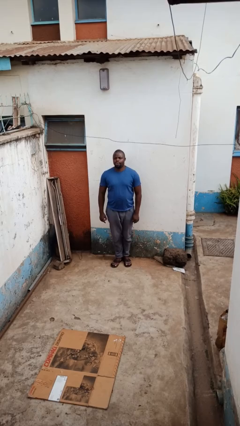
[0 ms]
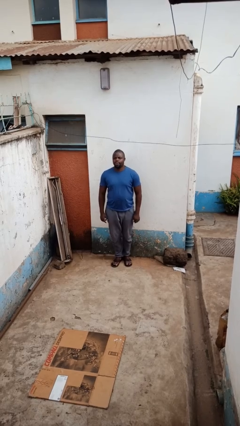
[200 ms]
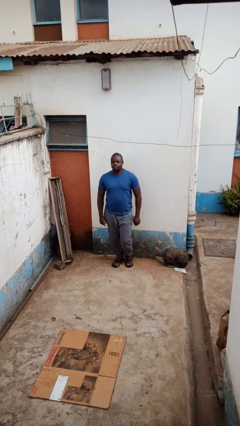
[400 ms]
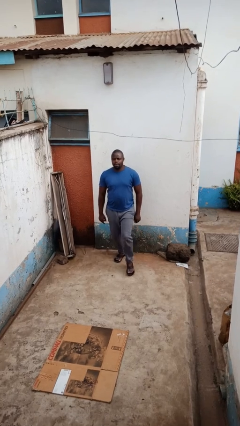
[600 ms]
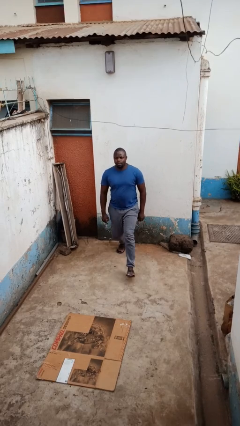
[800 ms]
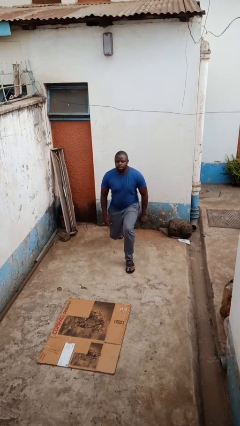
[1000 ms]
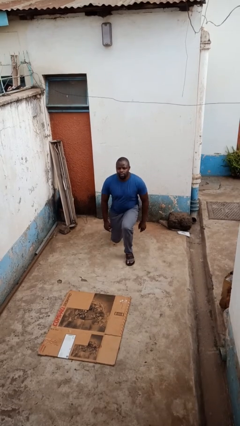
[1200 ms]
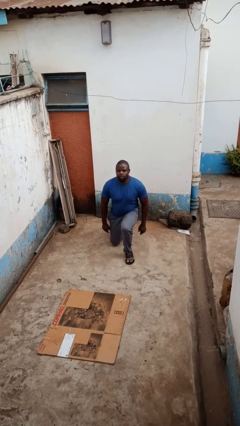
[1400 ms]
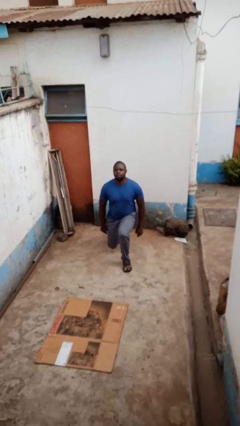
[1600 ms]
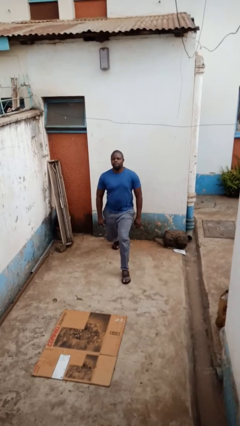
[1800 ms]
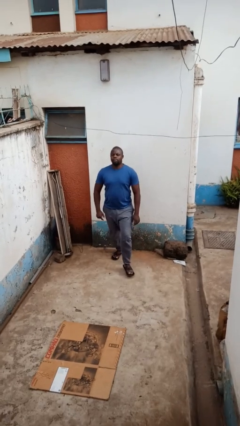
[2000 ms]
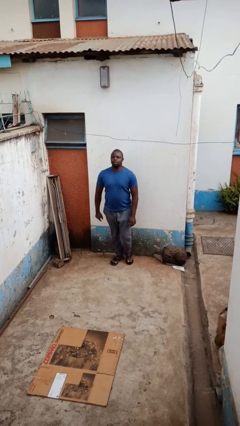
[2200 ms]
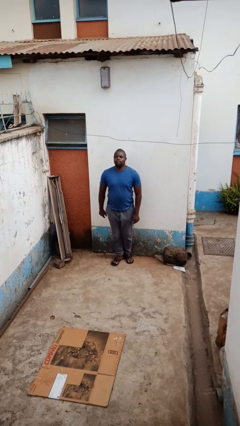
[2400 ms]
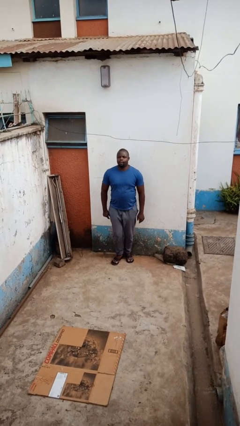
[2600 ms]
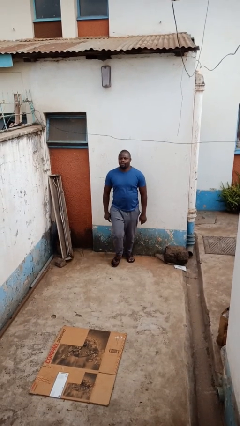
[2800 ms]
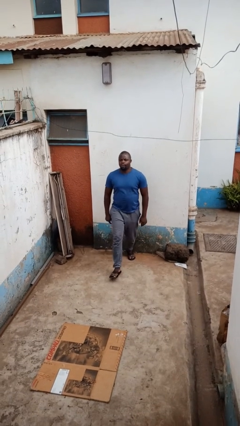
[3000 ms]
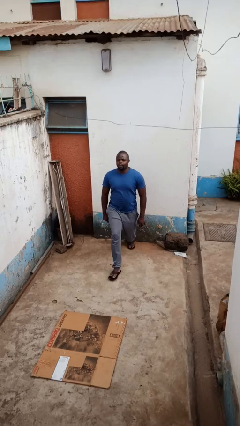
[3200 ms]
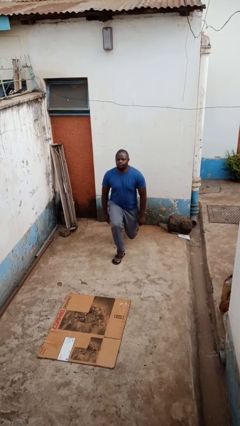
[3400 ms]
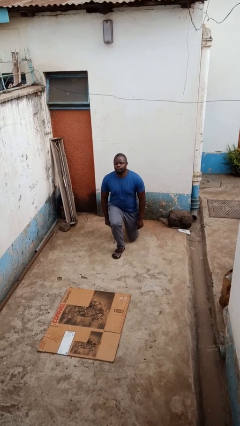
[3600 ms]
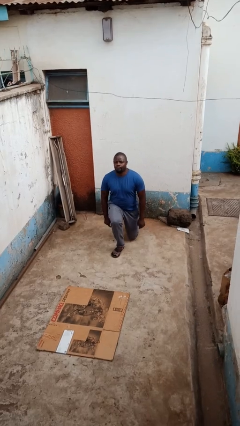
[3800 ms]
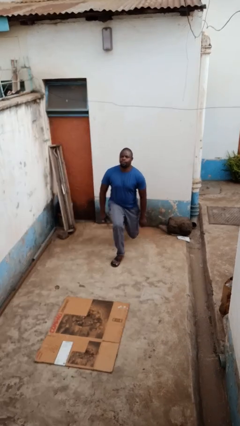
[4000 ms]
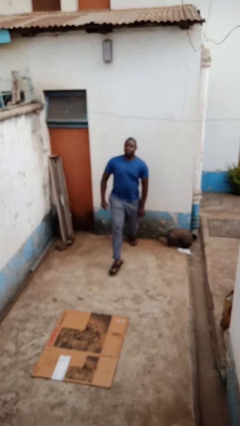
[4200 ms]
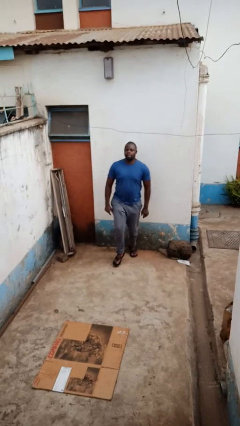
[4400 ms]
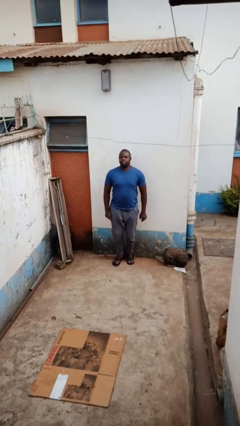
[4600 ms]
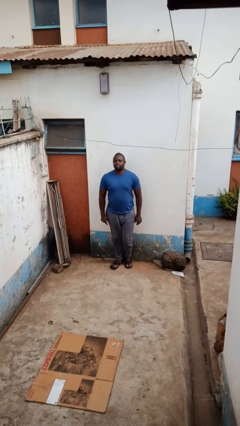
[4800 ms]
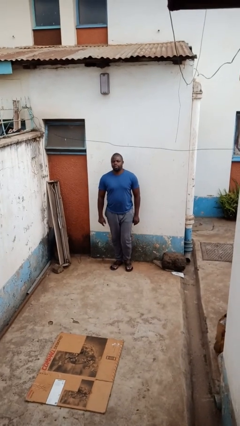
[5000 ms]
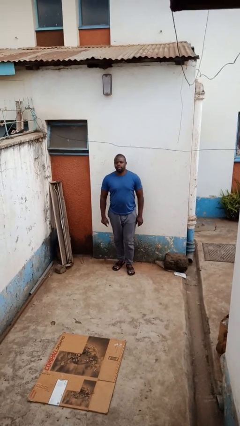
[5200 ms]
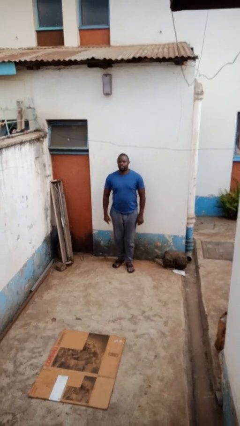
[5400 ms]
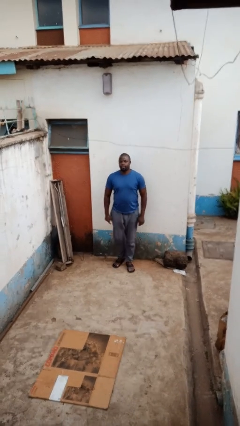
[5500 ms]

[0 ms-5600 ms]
person exercises with lunges

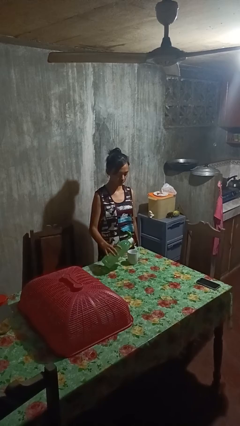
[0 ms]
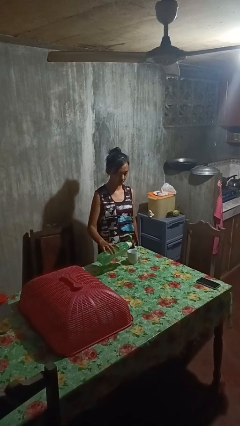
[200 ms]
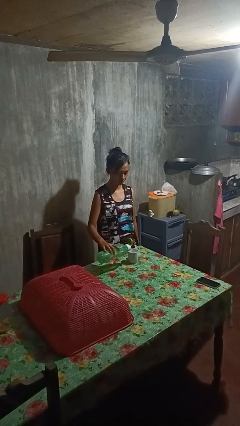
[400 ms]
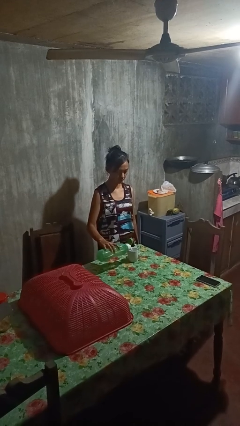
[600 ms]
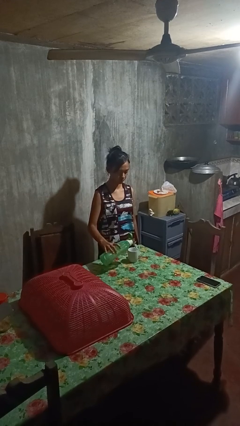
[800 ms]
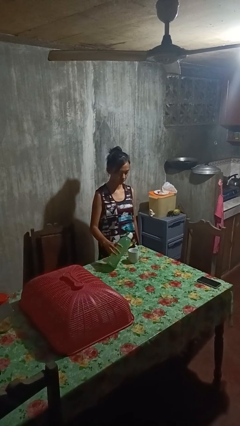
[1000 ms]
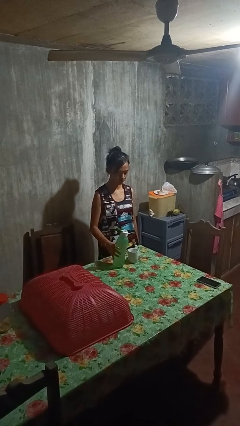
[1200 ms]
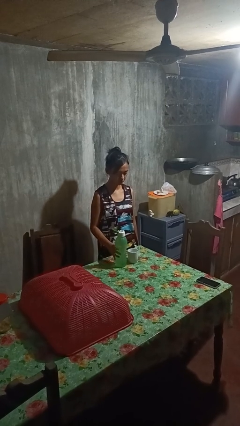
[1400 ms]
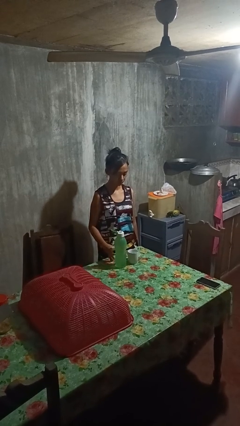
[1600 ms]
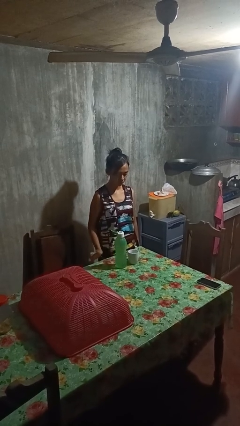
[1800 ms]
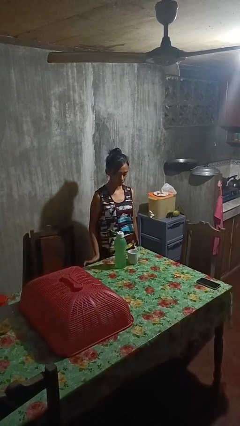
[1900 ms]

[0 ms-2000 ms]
person pours liquid into cup

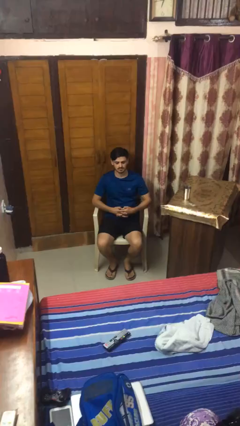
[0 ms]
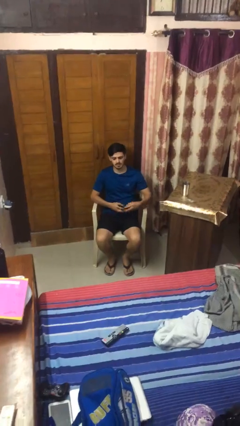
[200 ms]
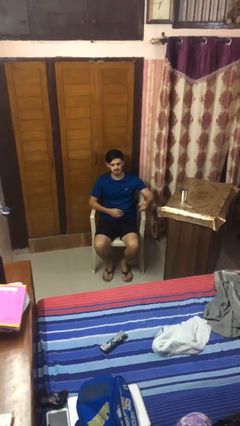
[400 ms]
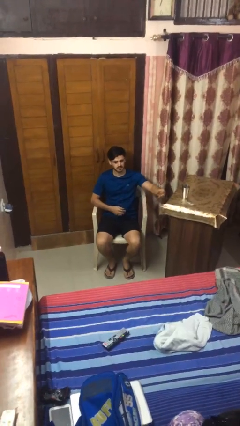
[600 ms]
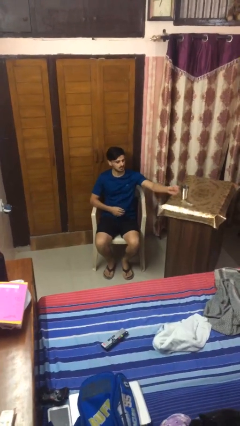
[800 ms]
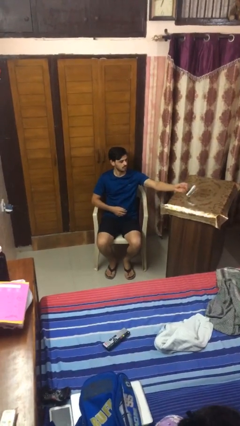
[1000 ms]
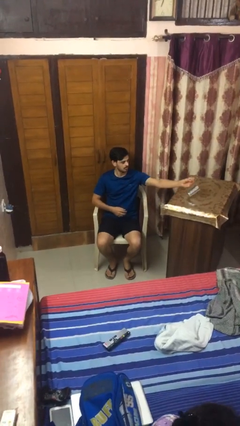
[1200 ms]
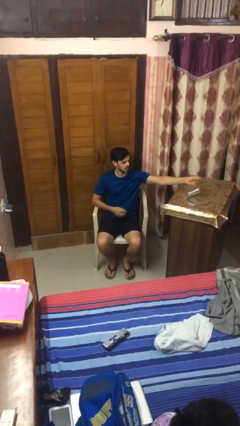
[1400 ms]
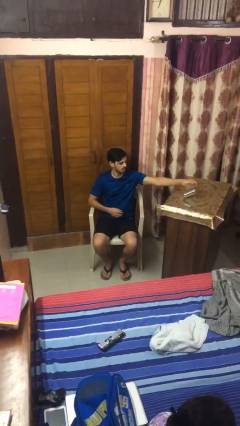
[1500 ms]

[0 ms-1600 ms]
person knocks over glass

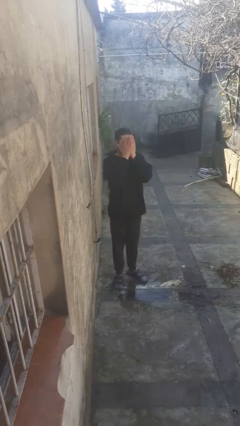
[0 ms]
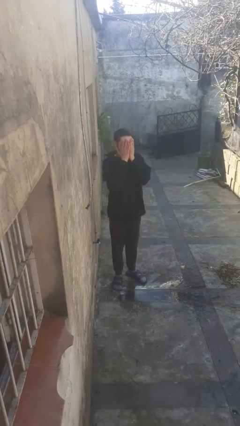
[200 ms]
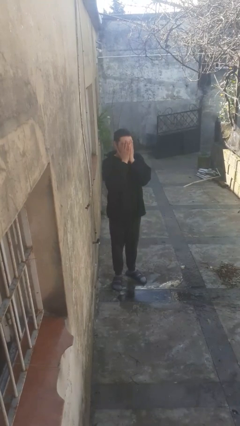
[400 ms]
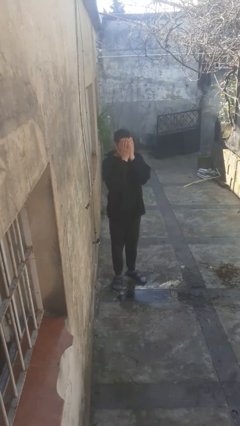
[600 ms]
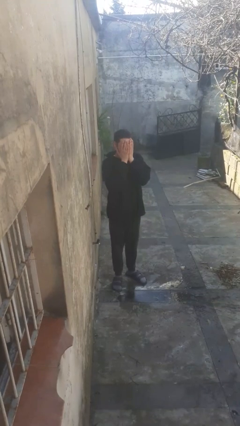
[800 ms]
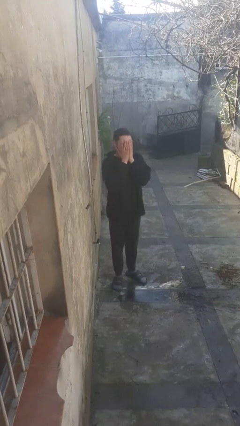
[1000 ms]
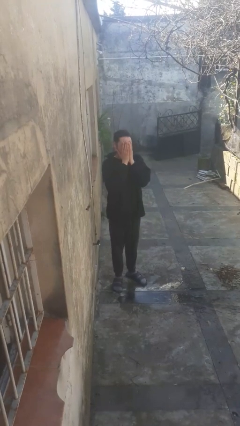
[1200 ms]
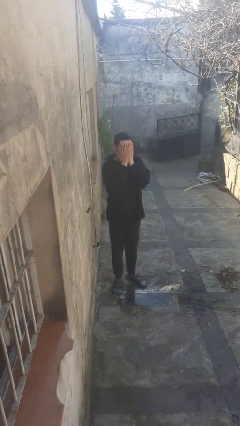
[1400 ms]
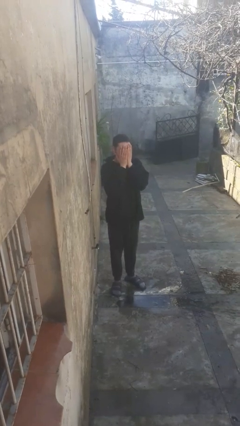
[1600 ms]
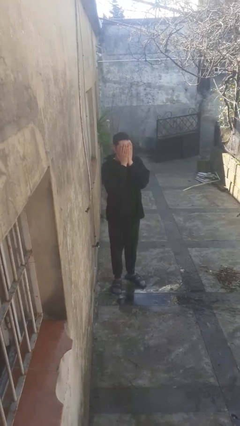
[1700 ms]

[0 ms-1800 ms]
person covers face with hands

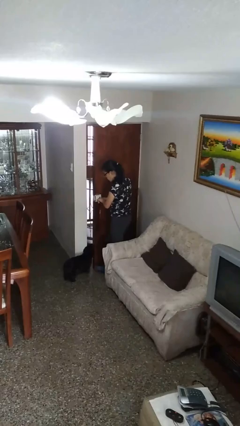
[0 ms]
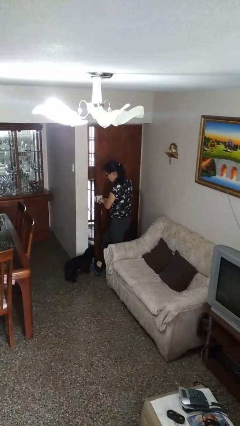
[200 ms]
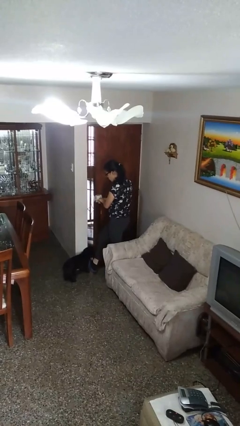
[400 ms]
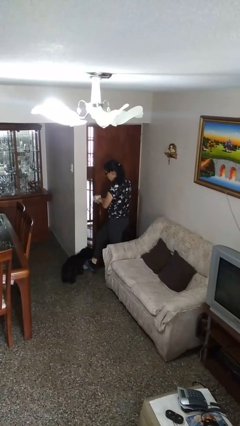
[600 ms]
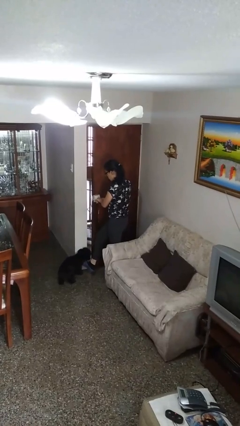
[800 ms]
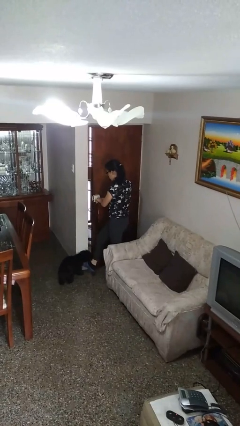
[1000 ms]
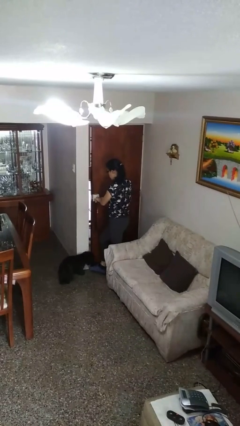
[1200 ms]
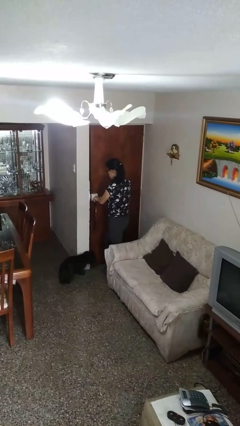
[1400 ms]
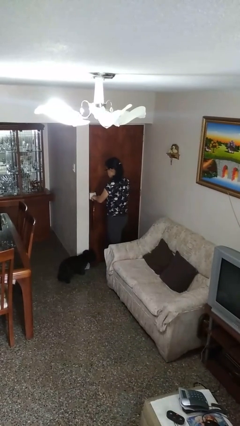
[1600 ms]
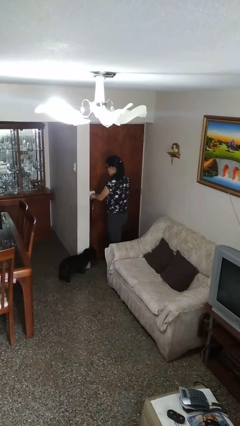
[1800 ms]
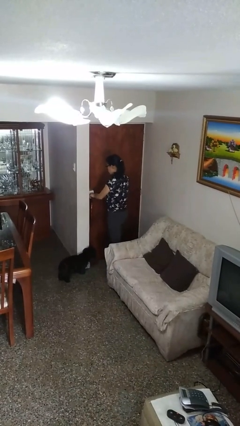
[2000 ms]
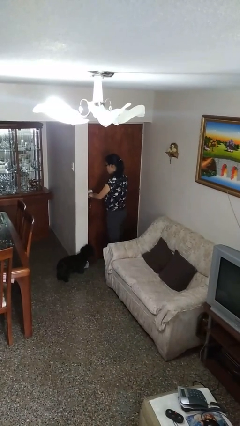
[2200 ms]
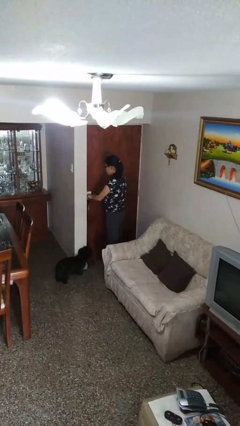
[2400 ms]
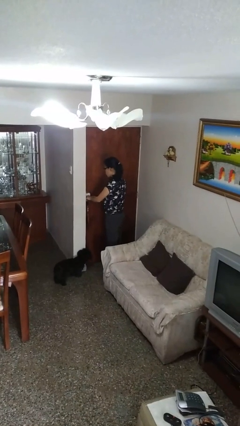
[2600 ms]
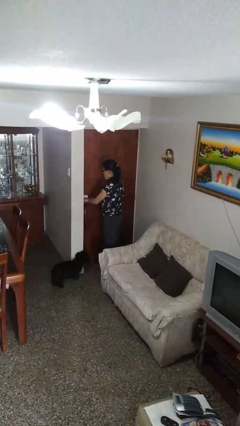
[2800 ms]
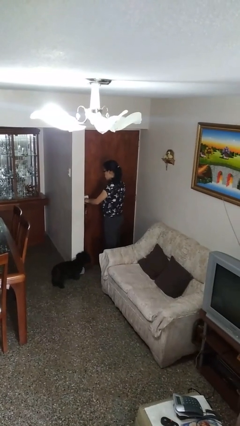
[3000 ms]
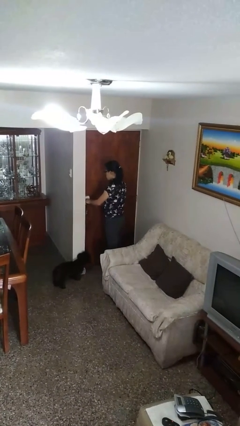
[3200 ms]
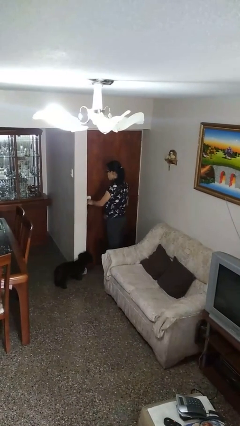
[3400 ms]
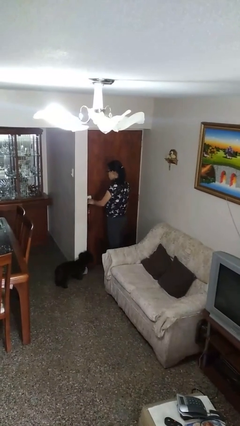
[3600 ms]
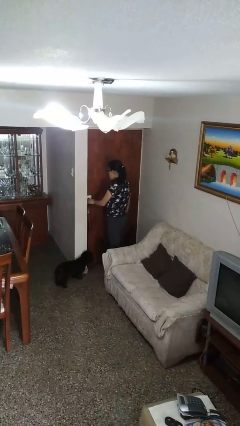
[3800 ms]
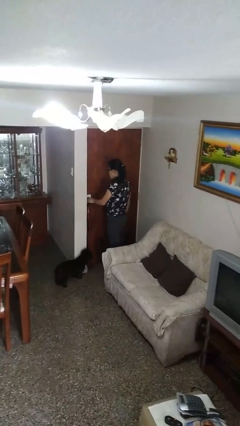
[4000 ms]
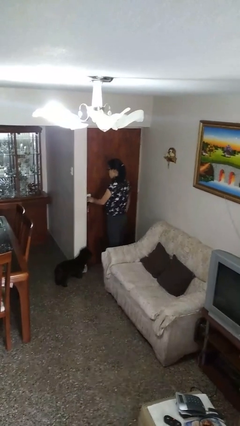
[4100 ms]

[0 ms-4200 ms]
person closes facility door

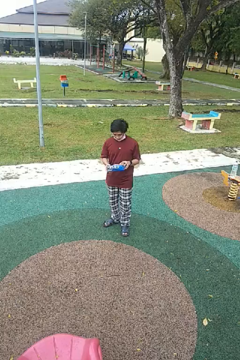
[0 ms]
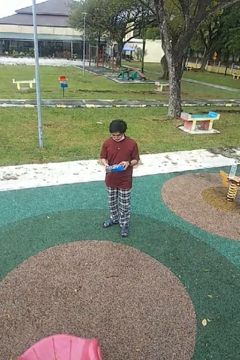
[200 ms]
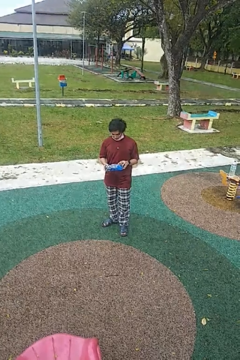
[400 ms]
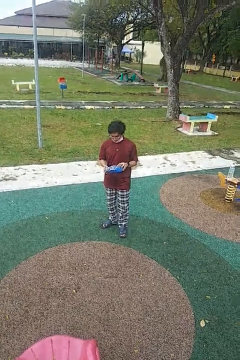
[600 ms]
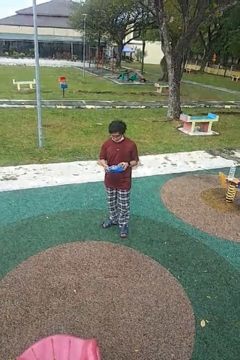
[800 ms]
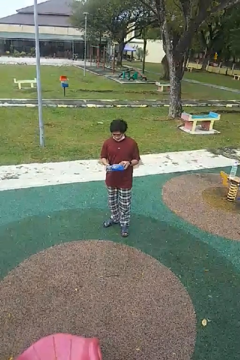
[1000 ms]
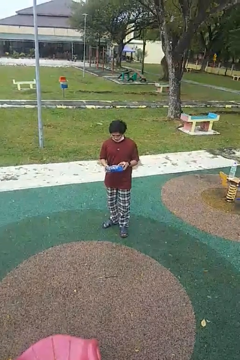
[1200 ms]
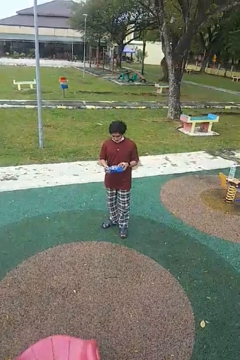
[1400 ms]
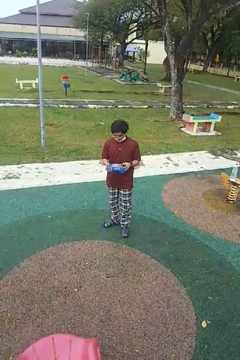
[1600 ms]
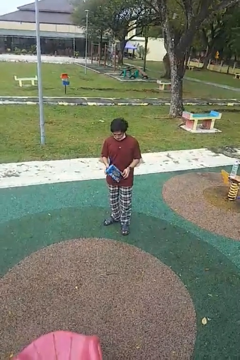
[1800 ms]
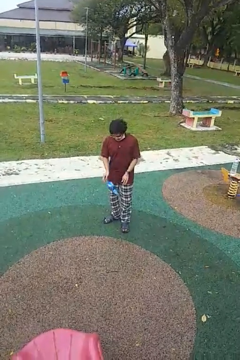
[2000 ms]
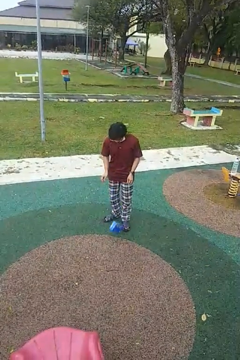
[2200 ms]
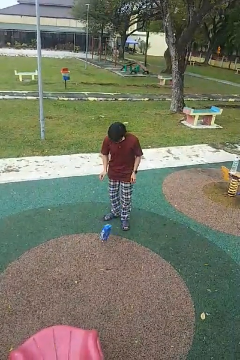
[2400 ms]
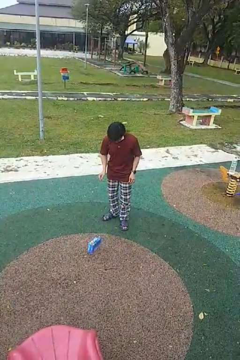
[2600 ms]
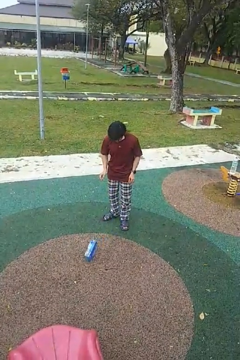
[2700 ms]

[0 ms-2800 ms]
person drops object
